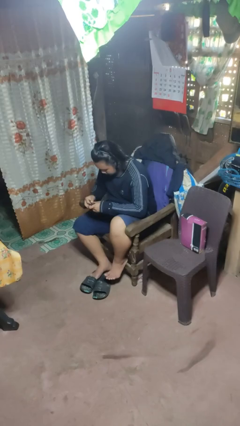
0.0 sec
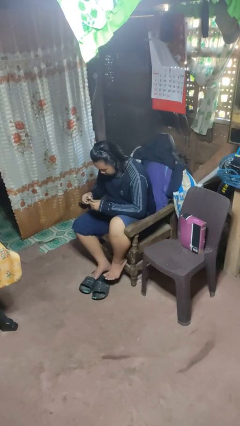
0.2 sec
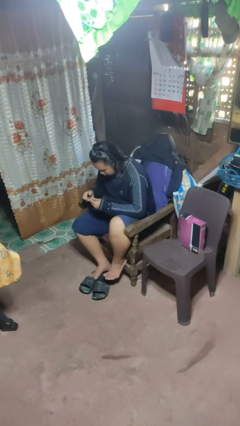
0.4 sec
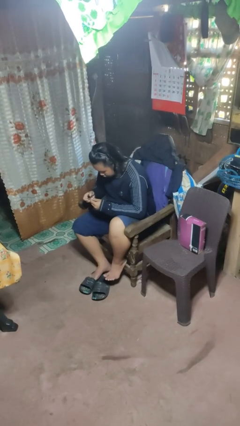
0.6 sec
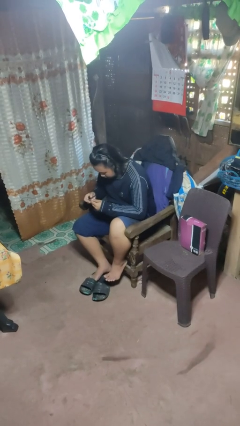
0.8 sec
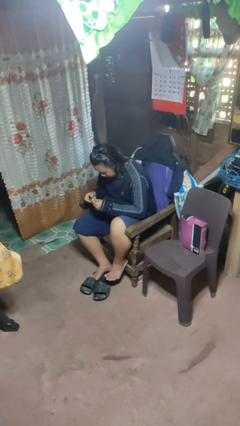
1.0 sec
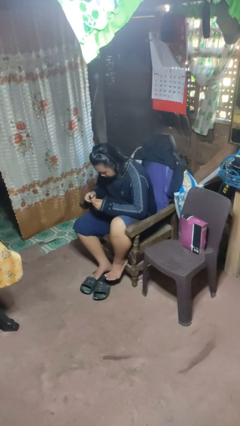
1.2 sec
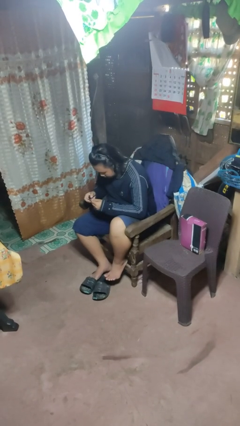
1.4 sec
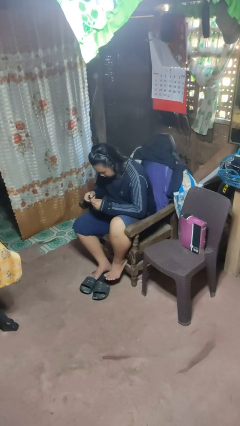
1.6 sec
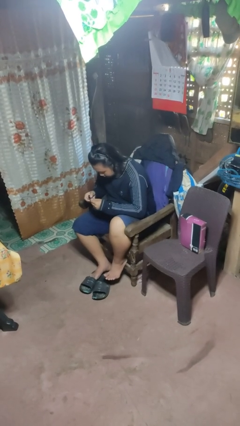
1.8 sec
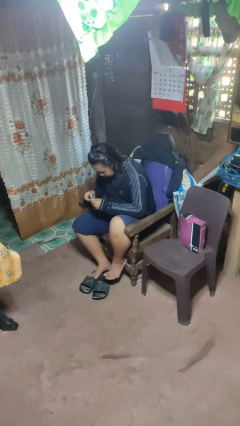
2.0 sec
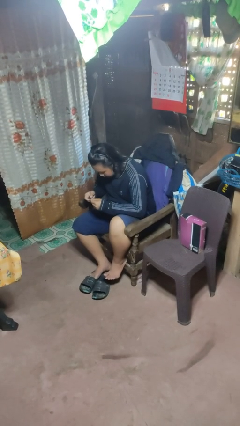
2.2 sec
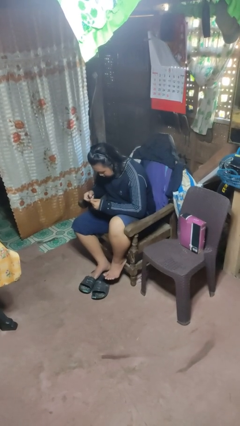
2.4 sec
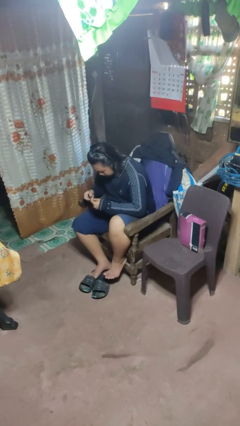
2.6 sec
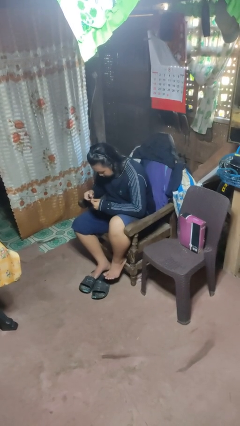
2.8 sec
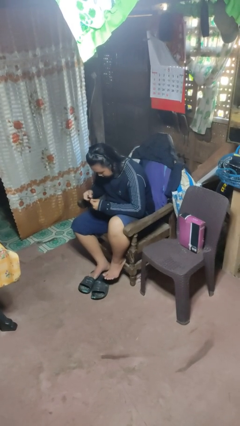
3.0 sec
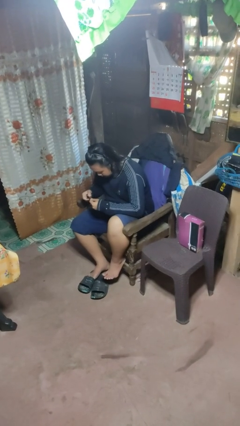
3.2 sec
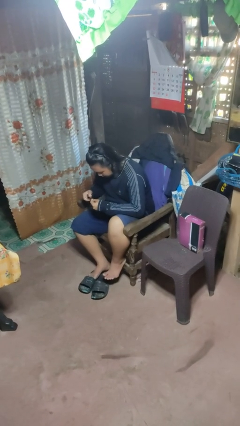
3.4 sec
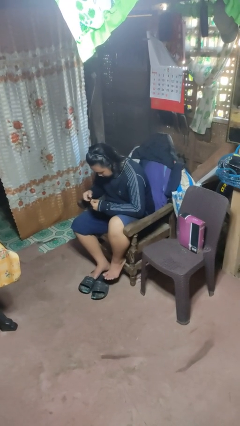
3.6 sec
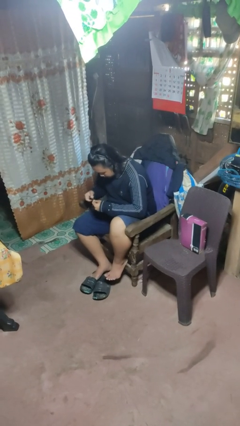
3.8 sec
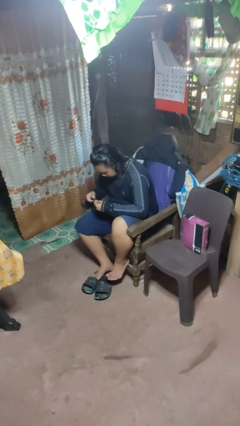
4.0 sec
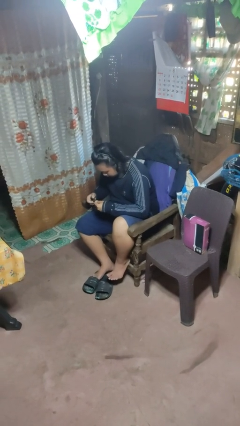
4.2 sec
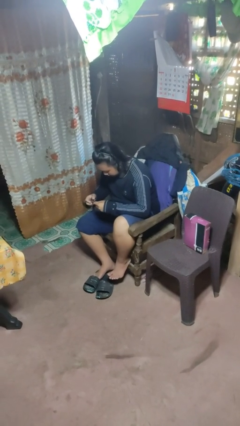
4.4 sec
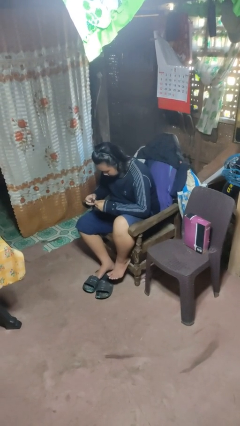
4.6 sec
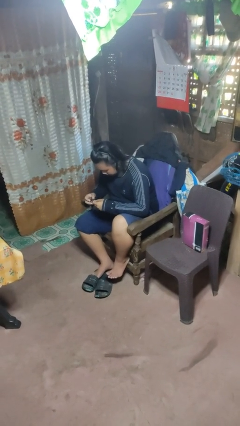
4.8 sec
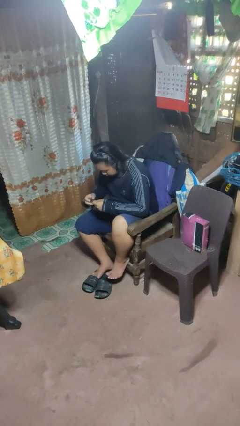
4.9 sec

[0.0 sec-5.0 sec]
person clips fingernails

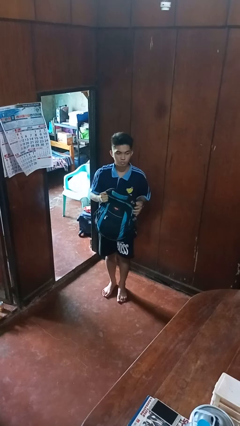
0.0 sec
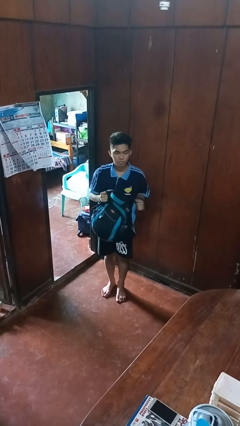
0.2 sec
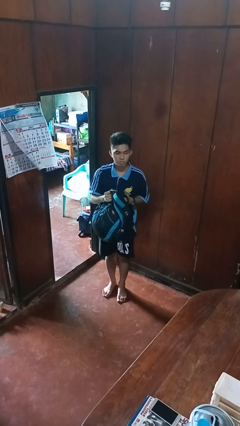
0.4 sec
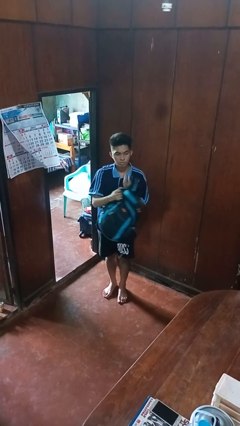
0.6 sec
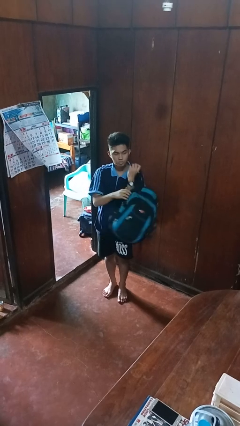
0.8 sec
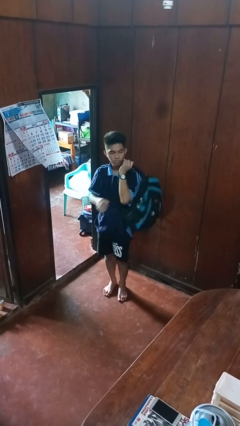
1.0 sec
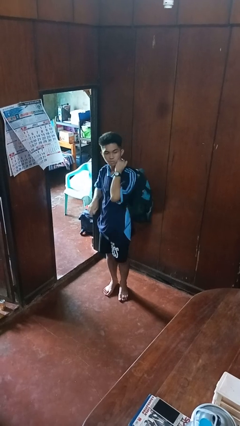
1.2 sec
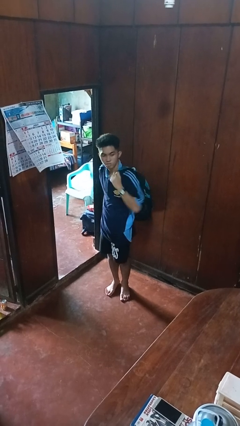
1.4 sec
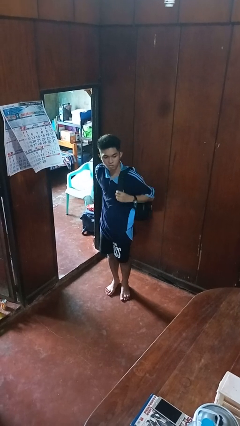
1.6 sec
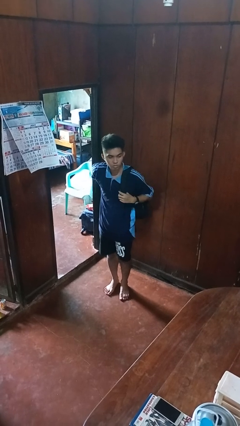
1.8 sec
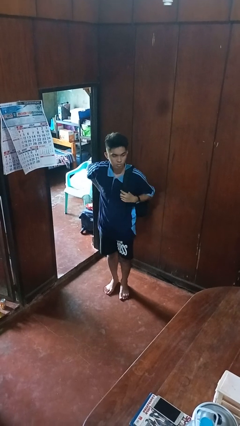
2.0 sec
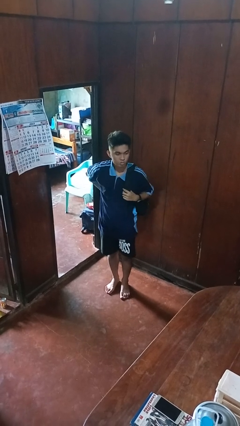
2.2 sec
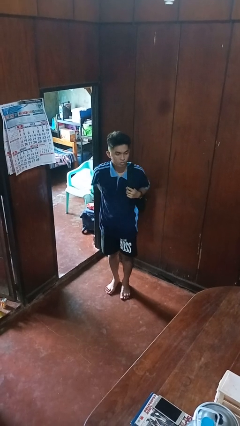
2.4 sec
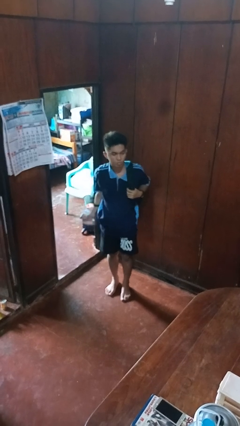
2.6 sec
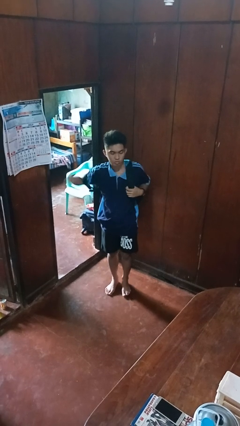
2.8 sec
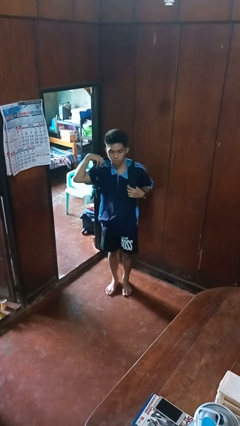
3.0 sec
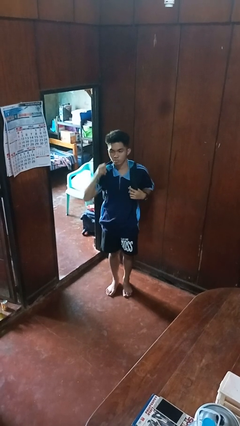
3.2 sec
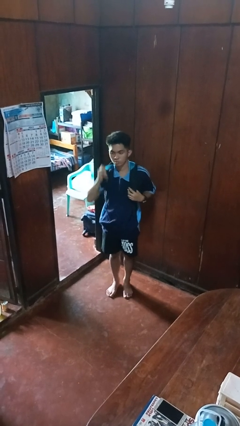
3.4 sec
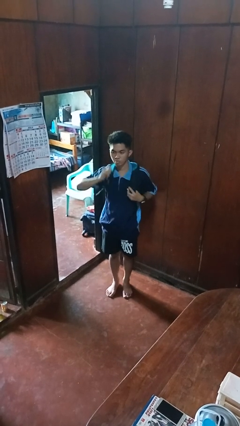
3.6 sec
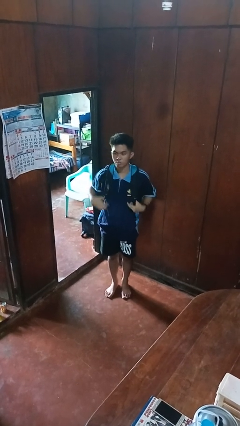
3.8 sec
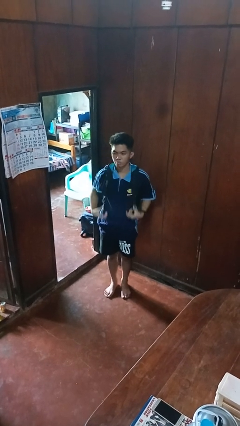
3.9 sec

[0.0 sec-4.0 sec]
person puts on backpack

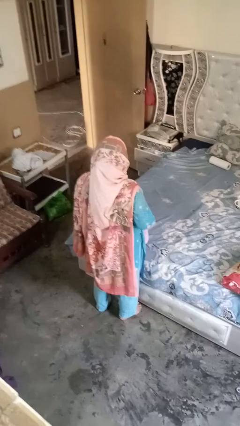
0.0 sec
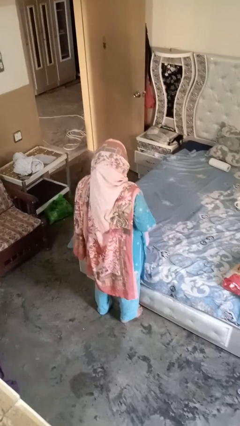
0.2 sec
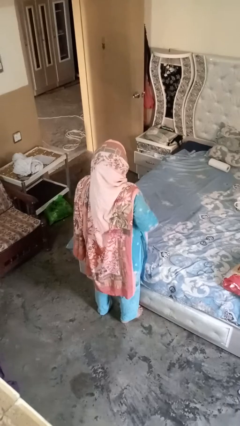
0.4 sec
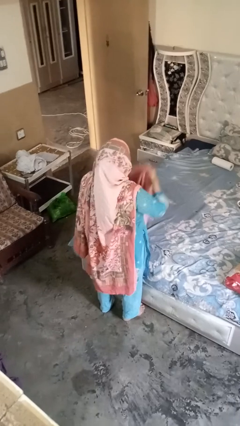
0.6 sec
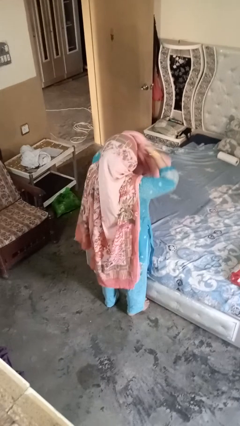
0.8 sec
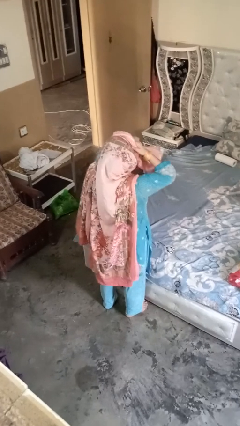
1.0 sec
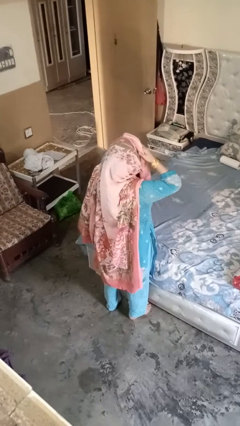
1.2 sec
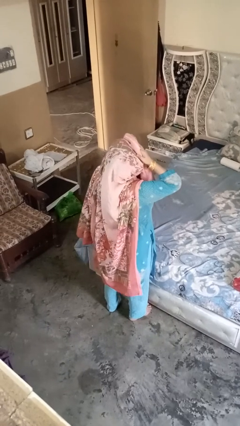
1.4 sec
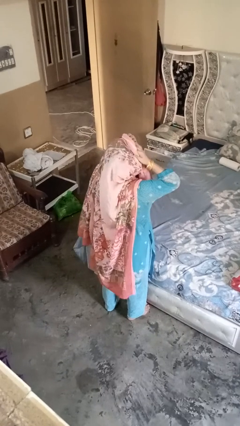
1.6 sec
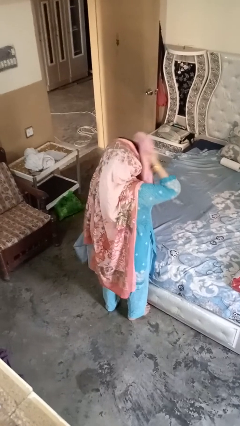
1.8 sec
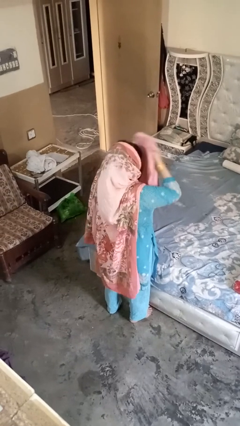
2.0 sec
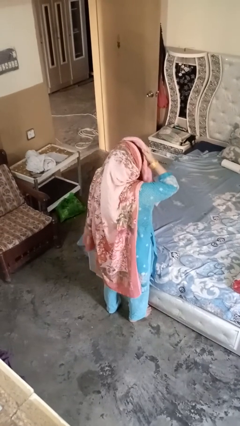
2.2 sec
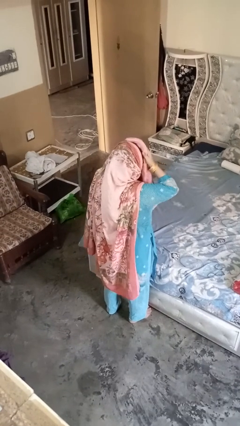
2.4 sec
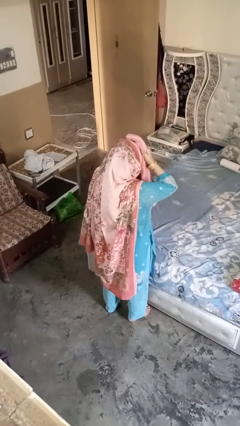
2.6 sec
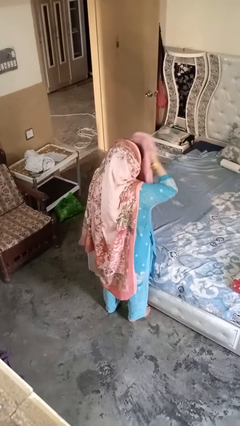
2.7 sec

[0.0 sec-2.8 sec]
person dries hair with towel

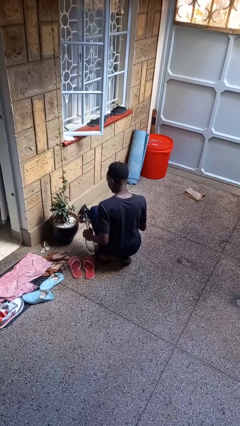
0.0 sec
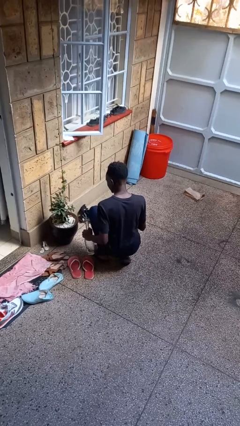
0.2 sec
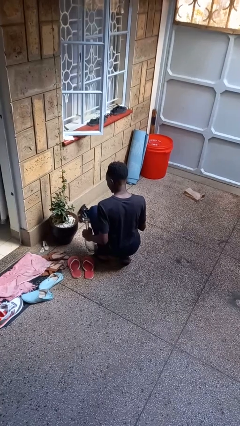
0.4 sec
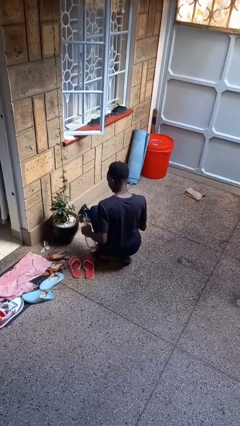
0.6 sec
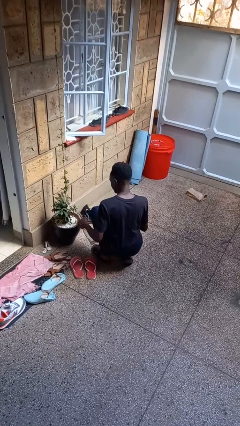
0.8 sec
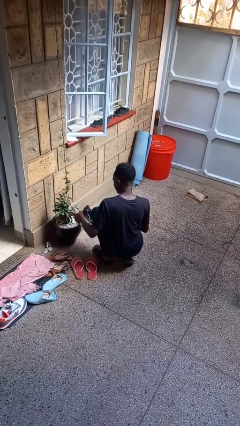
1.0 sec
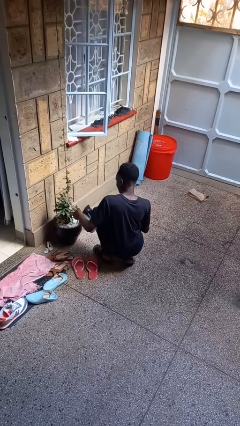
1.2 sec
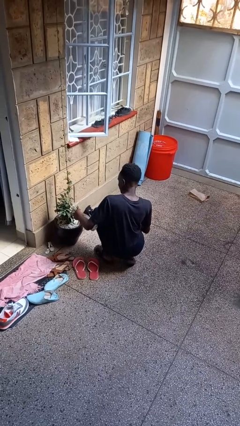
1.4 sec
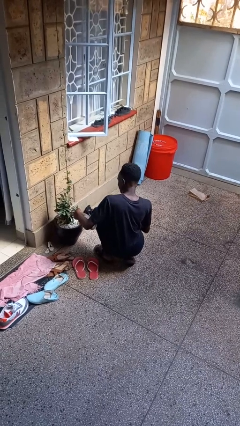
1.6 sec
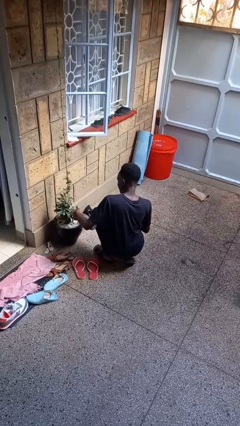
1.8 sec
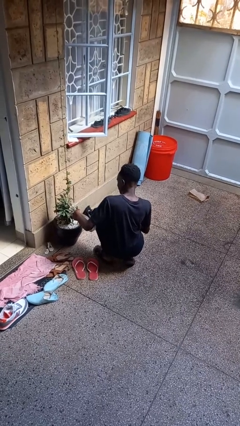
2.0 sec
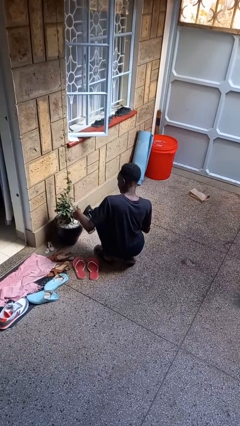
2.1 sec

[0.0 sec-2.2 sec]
person waters houseplant

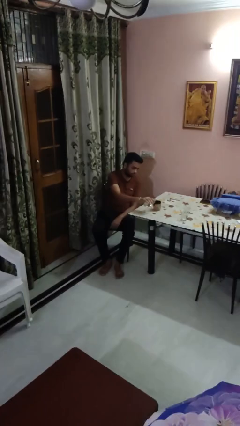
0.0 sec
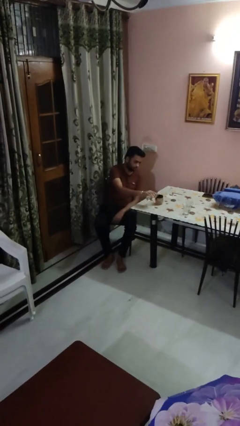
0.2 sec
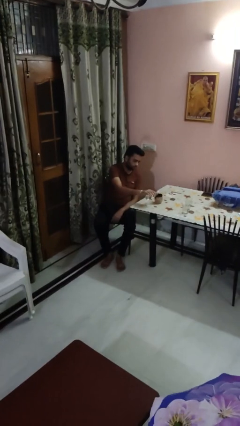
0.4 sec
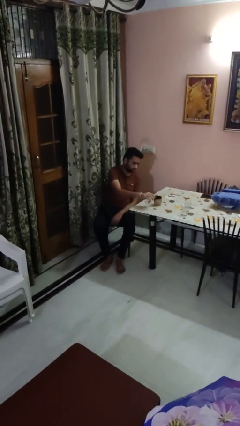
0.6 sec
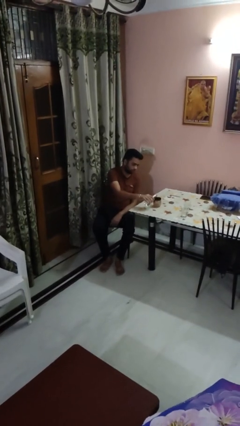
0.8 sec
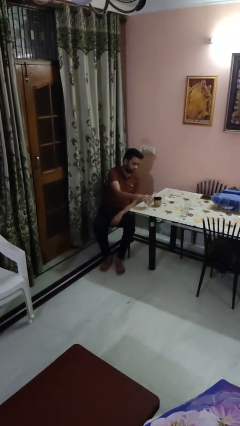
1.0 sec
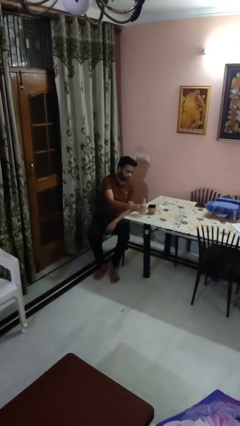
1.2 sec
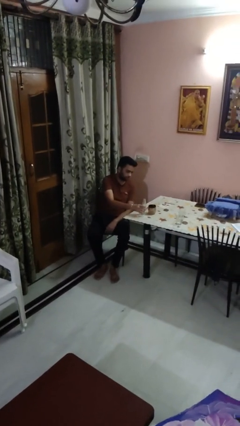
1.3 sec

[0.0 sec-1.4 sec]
person pours liquid into cup

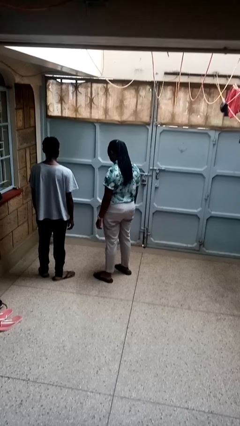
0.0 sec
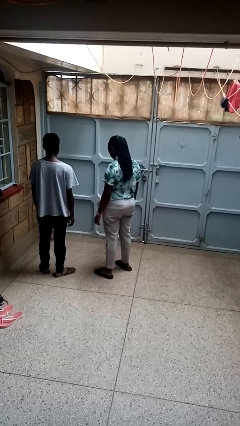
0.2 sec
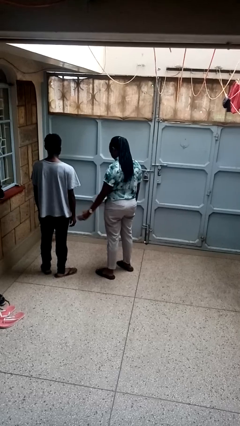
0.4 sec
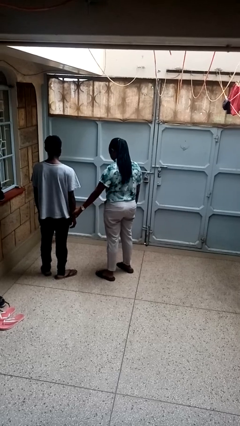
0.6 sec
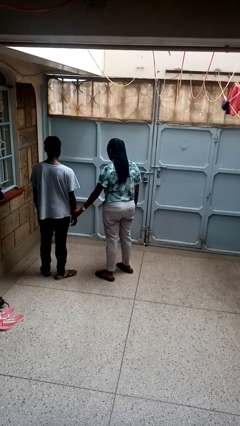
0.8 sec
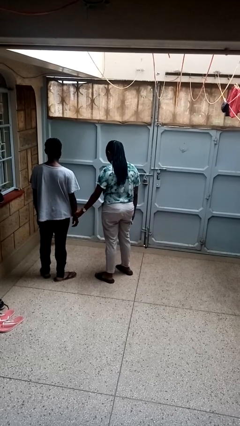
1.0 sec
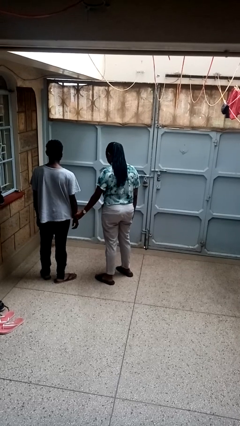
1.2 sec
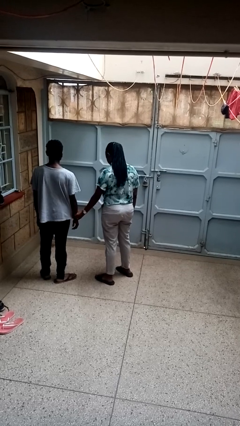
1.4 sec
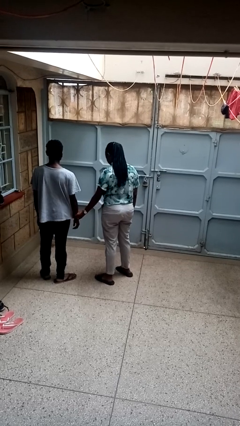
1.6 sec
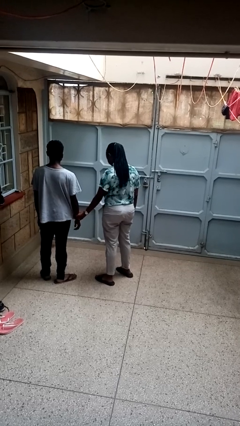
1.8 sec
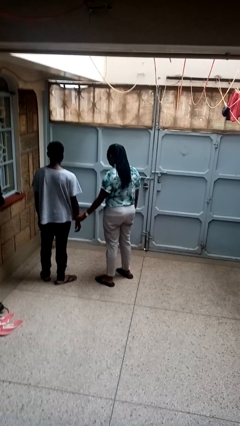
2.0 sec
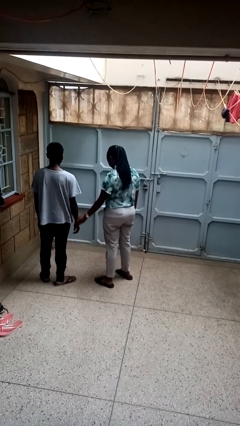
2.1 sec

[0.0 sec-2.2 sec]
person grabs person by forearm
